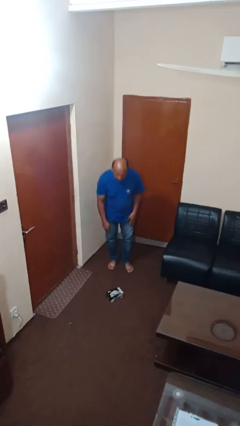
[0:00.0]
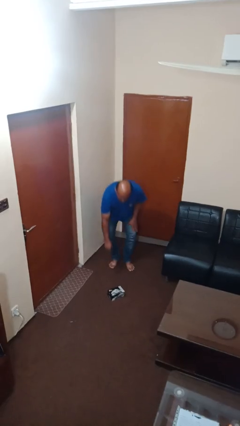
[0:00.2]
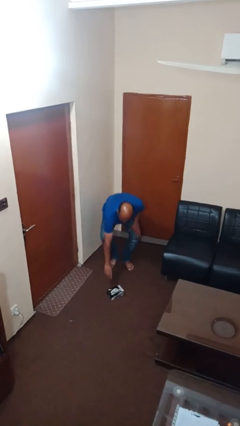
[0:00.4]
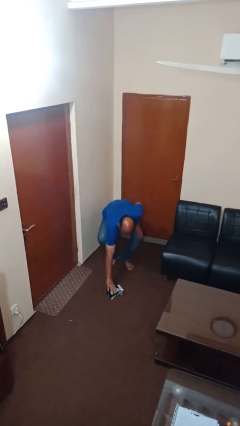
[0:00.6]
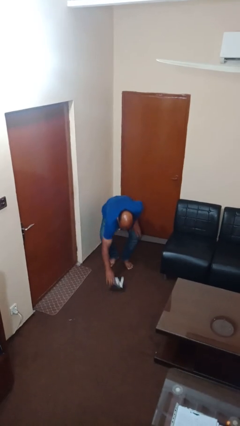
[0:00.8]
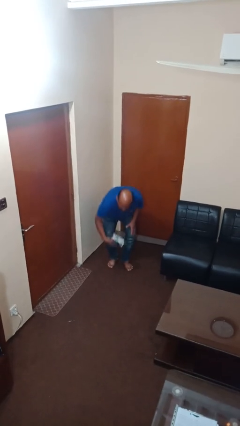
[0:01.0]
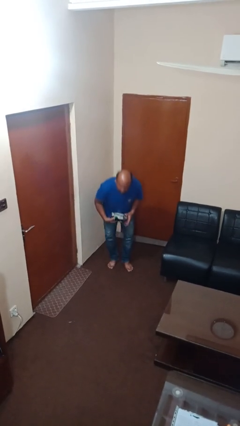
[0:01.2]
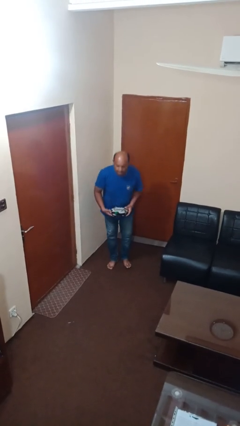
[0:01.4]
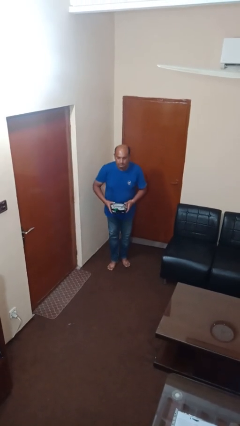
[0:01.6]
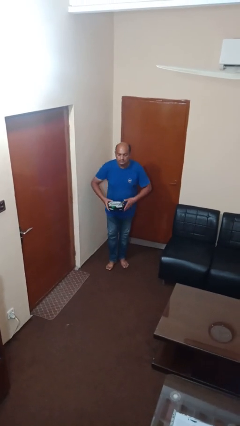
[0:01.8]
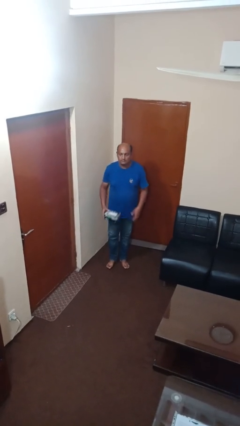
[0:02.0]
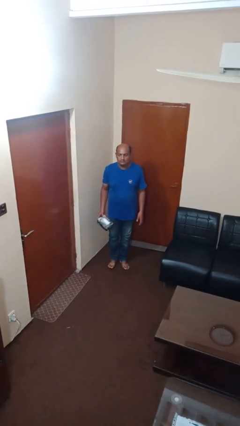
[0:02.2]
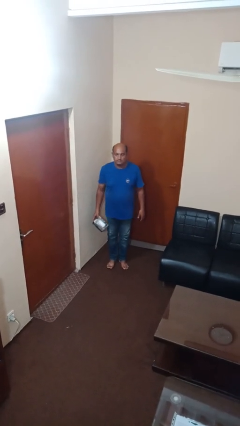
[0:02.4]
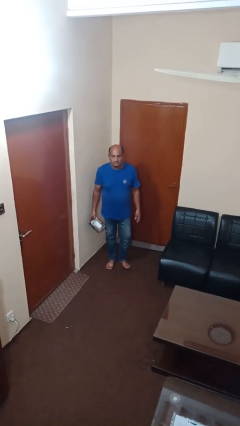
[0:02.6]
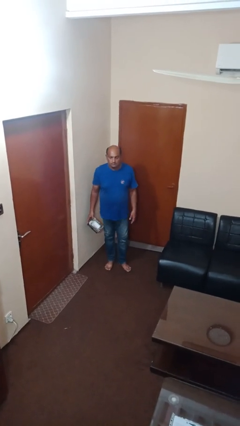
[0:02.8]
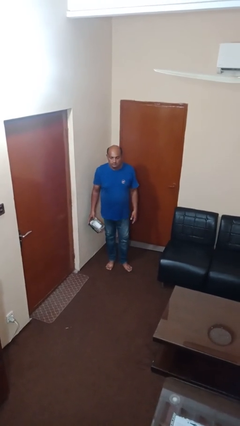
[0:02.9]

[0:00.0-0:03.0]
person picks up object from floor

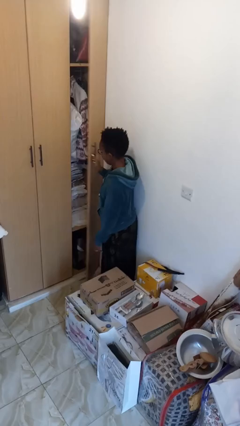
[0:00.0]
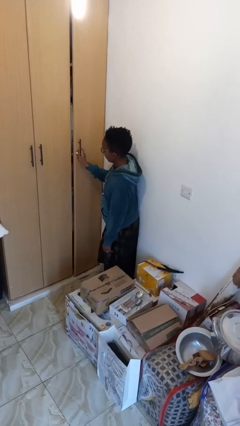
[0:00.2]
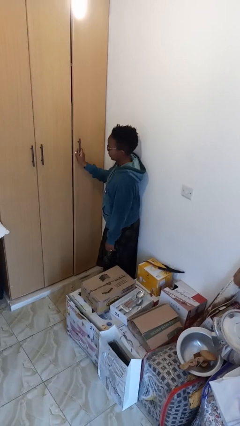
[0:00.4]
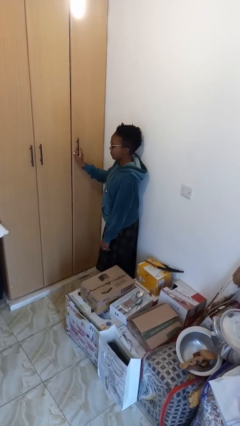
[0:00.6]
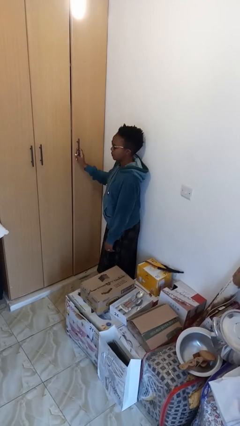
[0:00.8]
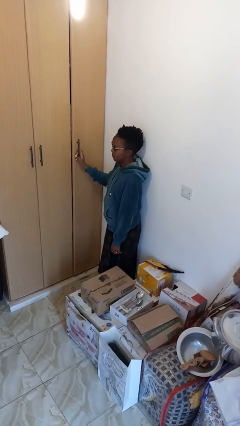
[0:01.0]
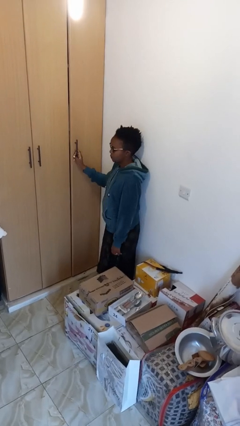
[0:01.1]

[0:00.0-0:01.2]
person closes closet door

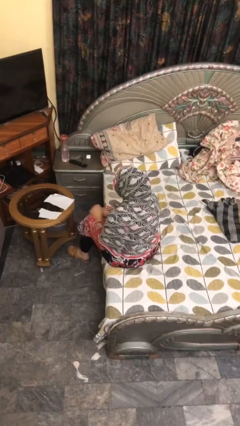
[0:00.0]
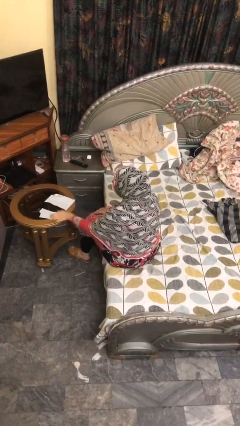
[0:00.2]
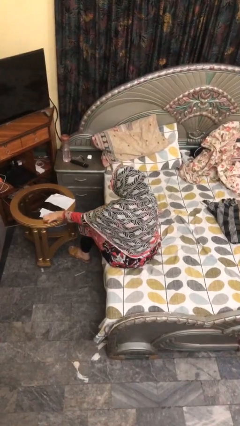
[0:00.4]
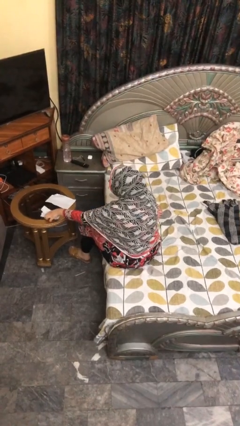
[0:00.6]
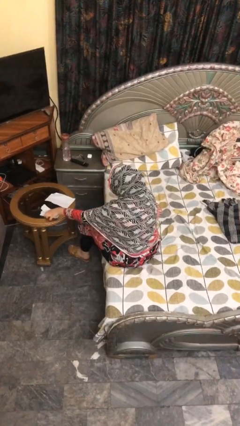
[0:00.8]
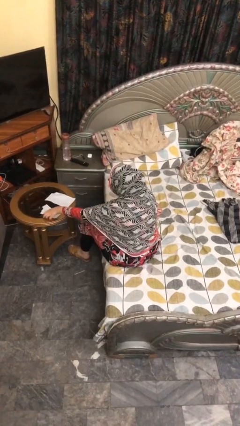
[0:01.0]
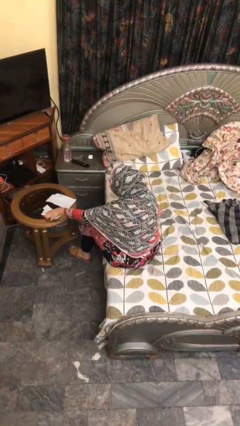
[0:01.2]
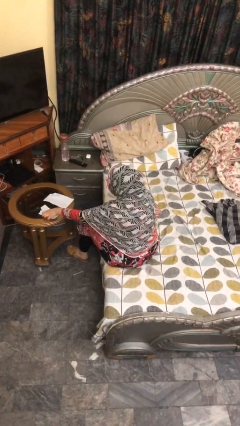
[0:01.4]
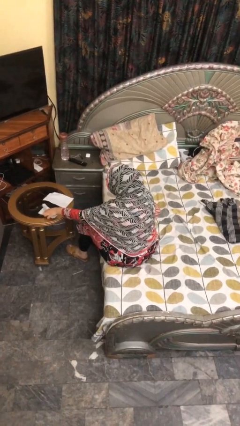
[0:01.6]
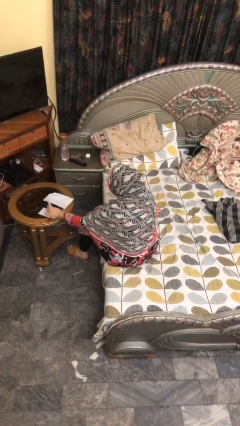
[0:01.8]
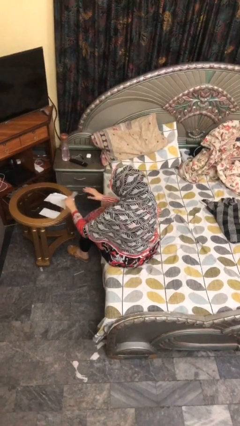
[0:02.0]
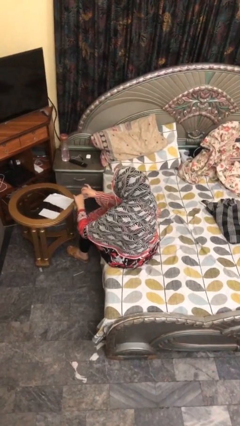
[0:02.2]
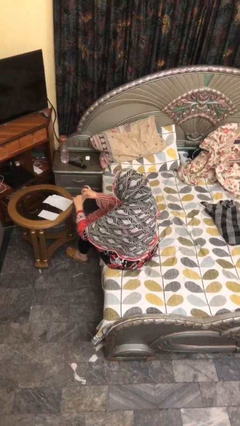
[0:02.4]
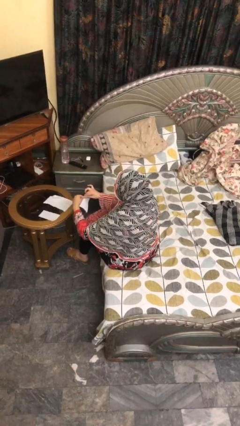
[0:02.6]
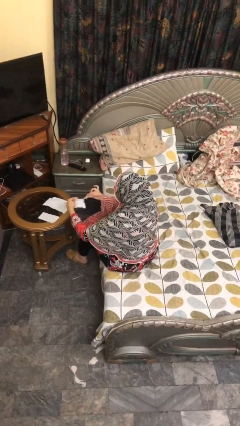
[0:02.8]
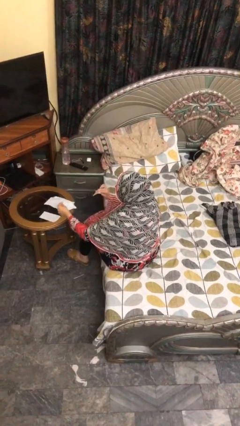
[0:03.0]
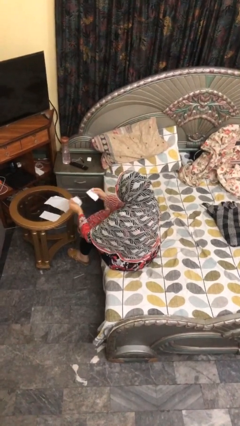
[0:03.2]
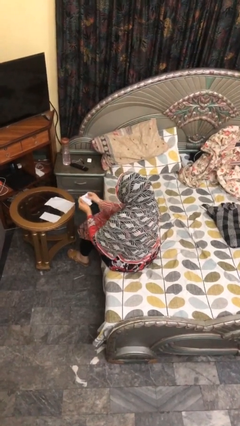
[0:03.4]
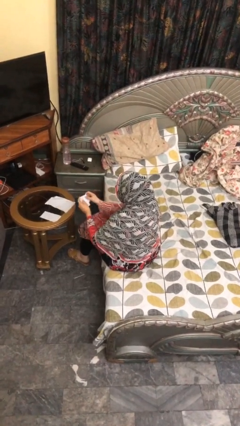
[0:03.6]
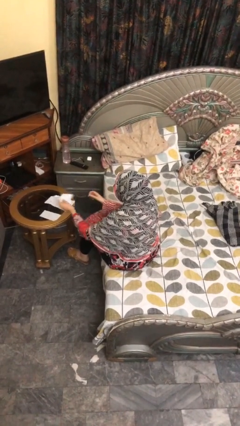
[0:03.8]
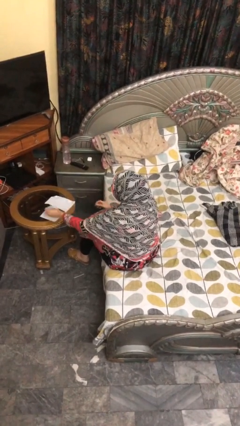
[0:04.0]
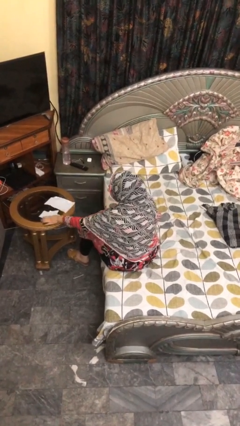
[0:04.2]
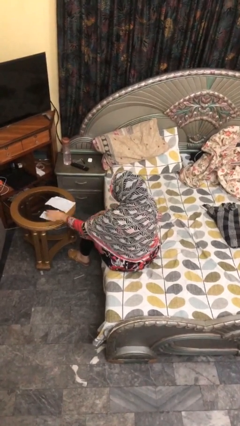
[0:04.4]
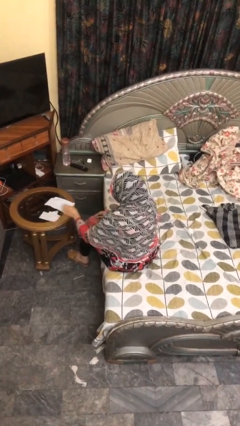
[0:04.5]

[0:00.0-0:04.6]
person tears paper

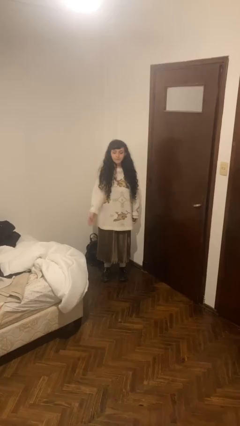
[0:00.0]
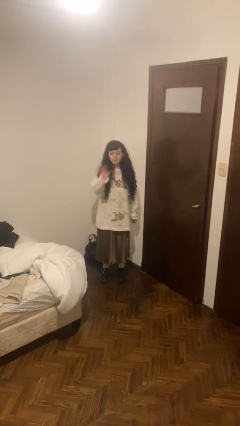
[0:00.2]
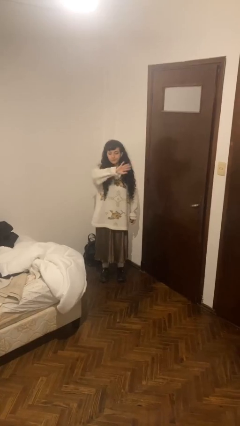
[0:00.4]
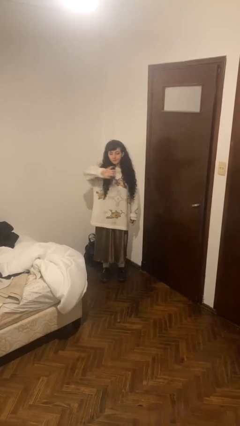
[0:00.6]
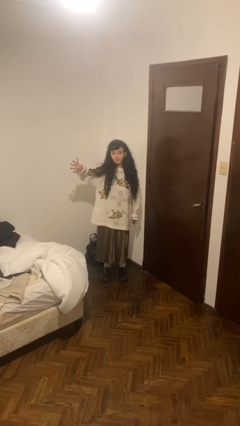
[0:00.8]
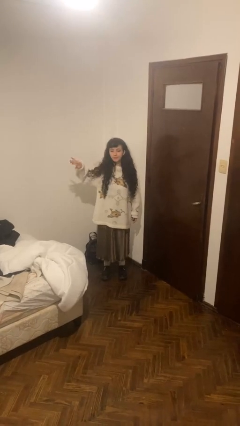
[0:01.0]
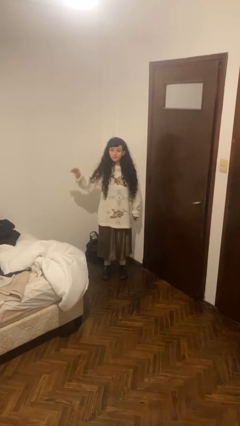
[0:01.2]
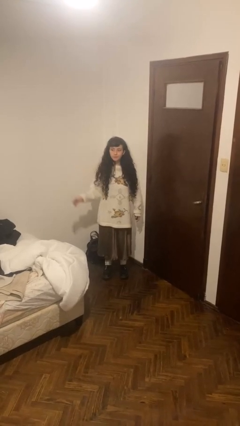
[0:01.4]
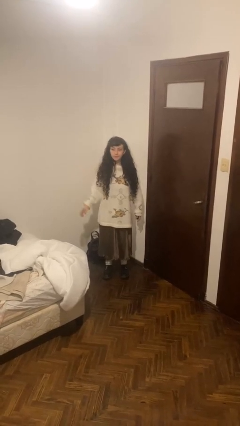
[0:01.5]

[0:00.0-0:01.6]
person gestures swipe right

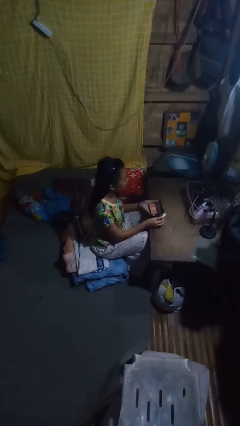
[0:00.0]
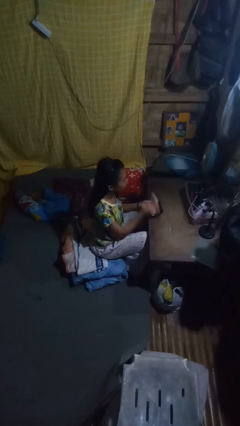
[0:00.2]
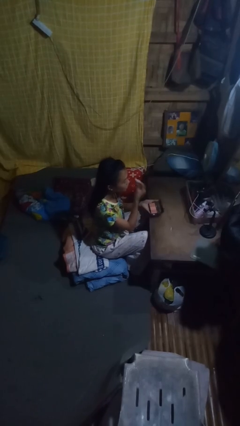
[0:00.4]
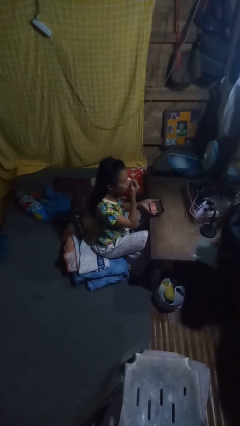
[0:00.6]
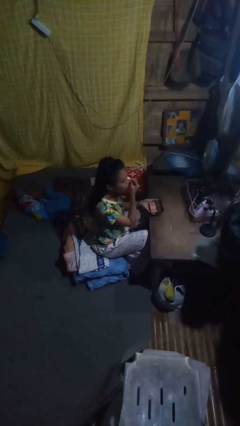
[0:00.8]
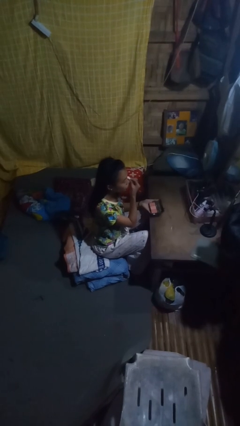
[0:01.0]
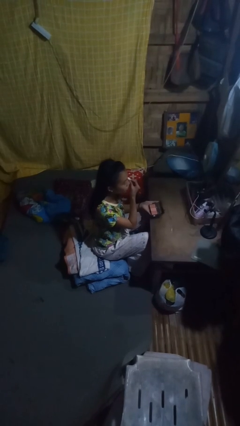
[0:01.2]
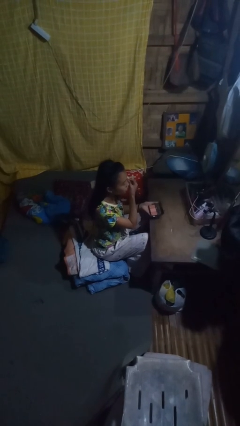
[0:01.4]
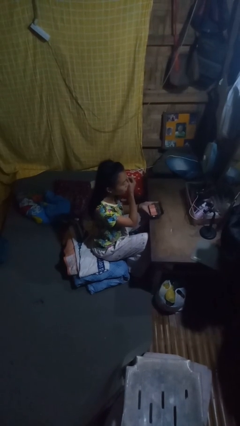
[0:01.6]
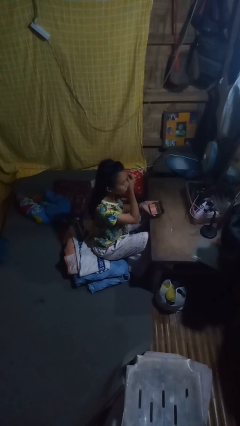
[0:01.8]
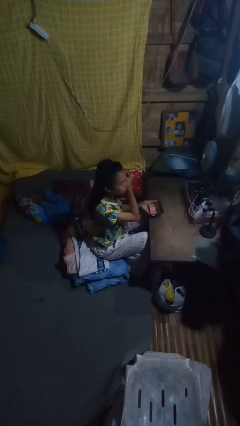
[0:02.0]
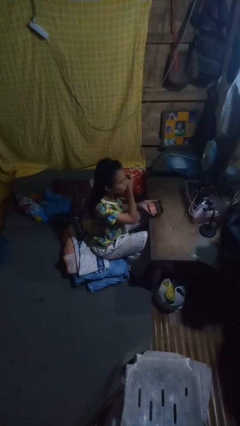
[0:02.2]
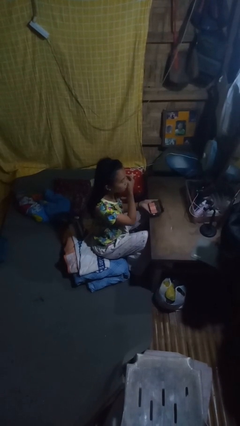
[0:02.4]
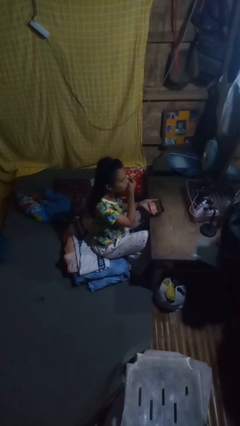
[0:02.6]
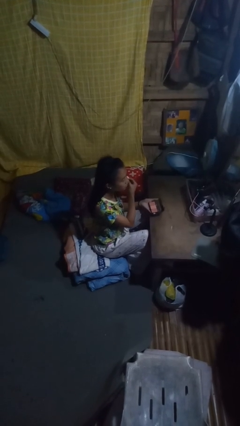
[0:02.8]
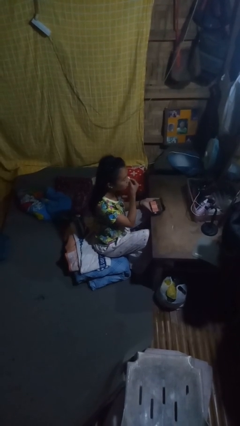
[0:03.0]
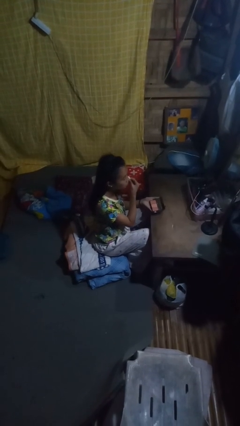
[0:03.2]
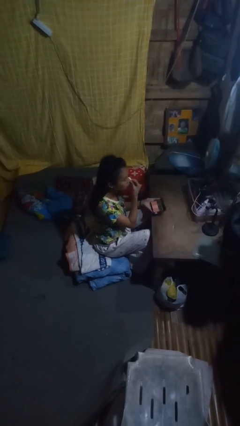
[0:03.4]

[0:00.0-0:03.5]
person applies foundation makeup

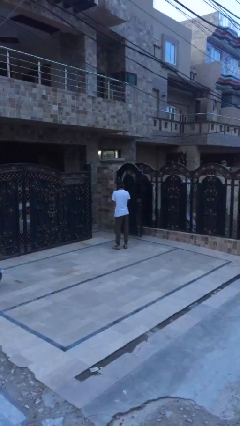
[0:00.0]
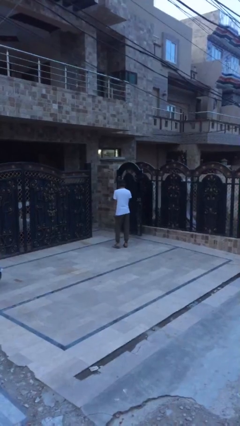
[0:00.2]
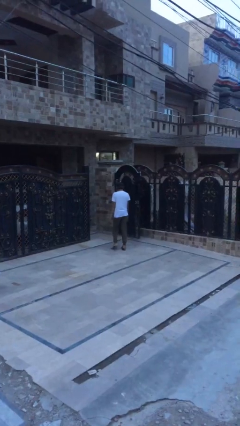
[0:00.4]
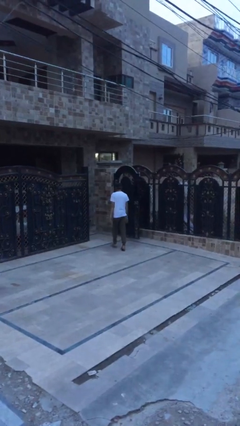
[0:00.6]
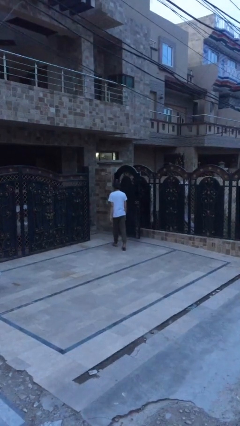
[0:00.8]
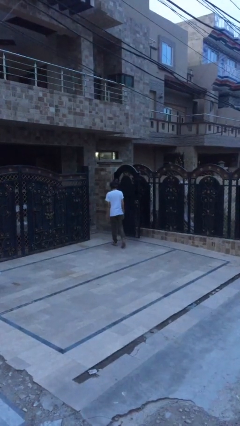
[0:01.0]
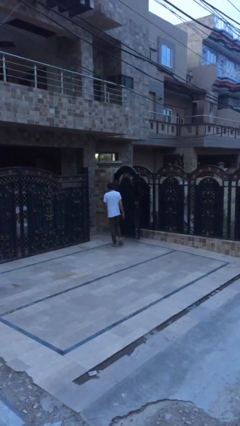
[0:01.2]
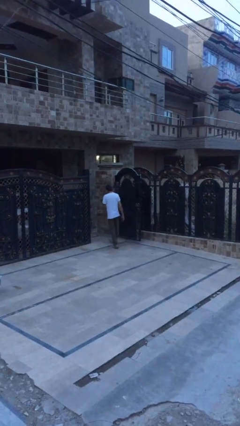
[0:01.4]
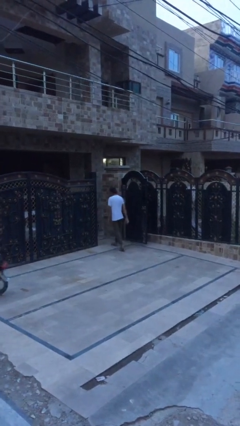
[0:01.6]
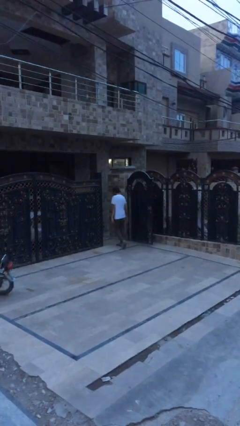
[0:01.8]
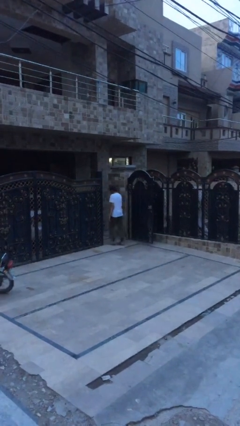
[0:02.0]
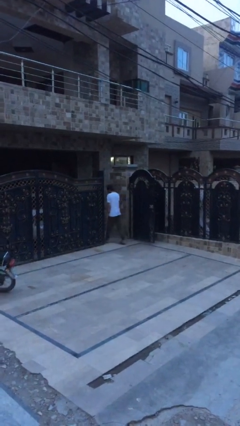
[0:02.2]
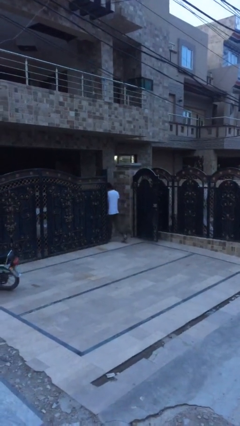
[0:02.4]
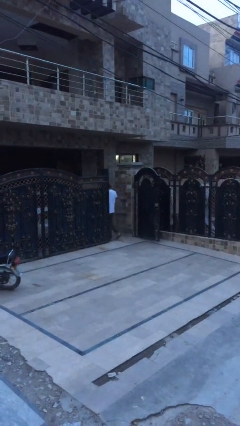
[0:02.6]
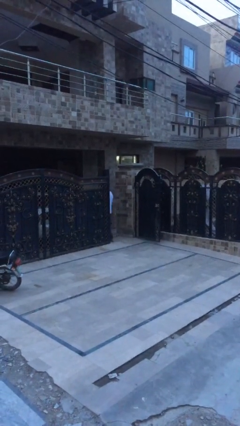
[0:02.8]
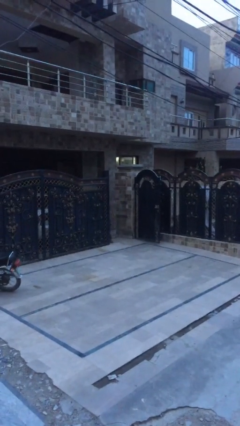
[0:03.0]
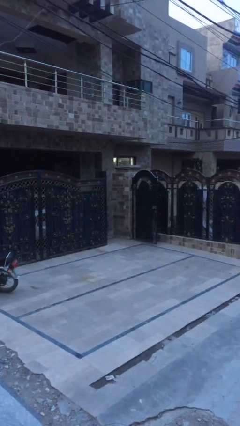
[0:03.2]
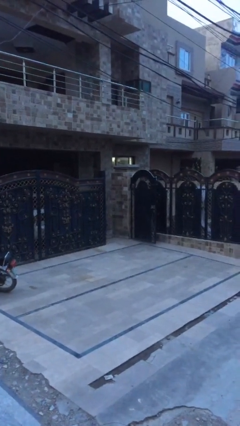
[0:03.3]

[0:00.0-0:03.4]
person exits scene through structure

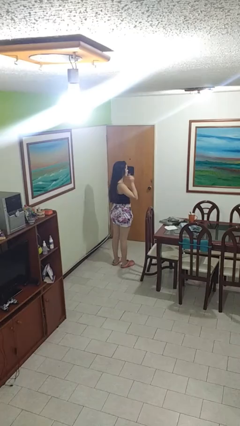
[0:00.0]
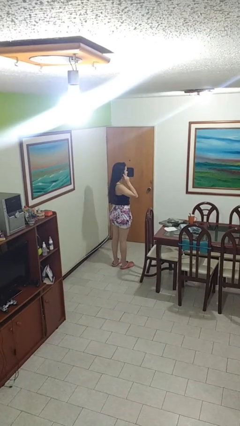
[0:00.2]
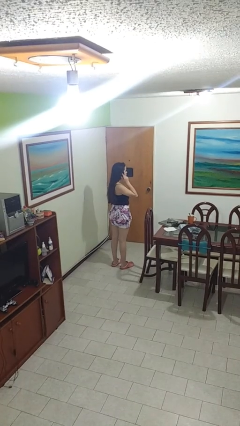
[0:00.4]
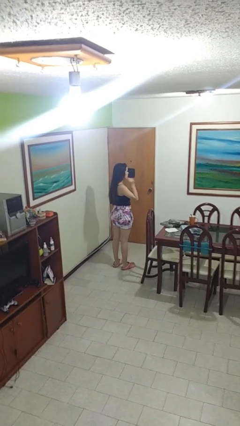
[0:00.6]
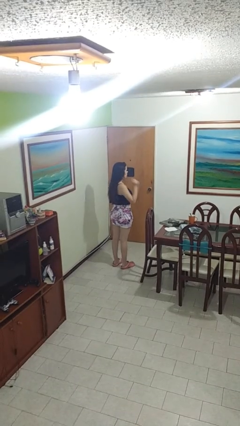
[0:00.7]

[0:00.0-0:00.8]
person gestures listen closely
